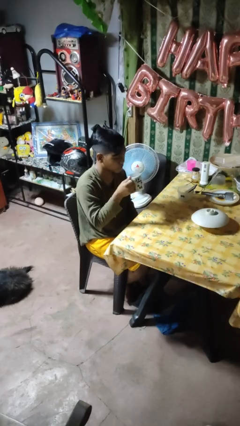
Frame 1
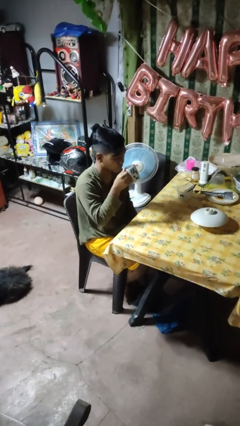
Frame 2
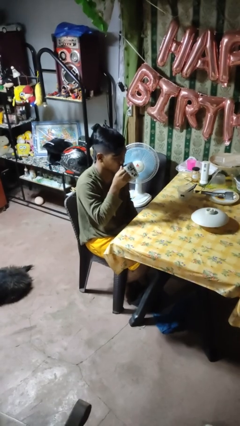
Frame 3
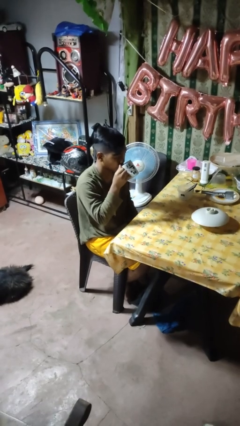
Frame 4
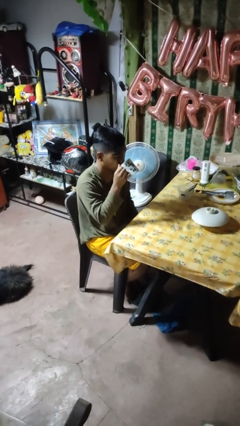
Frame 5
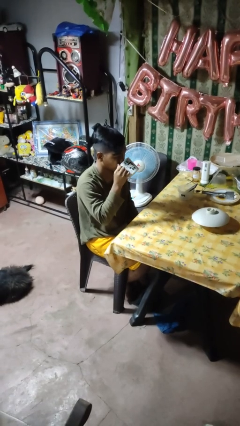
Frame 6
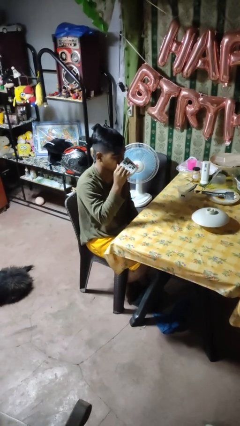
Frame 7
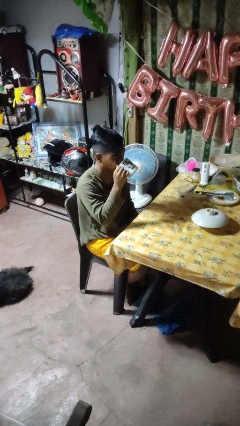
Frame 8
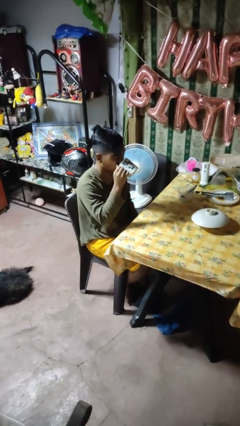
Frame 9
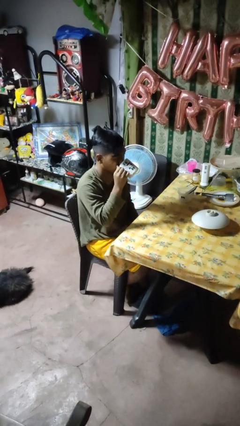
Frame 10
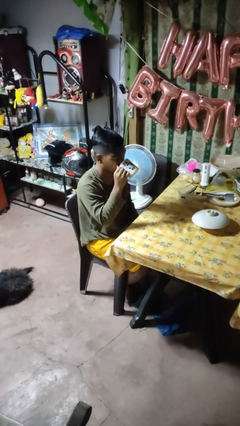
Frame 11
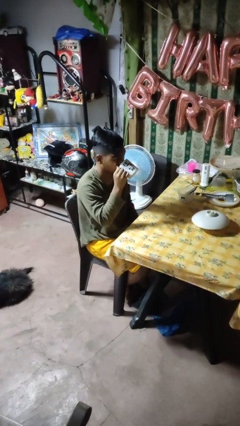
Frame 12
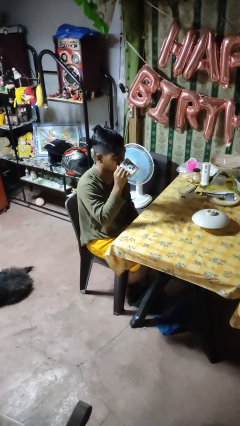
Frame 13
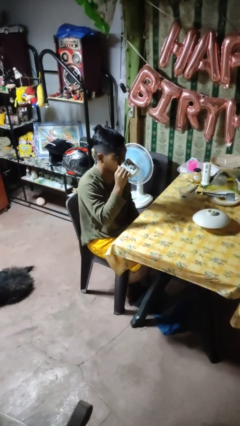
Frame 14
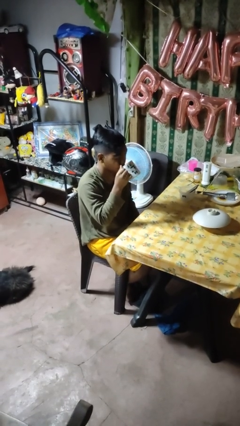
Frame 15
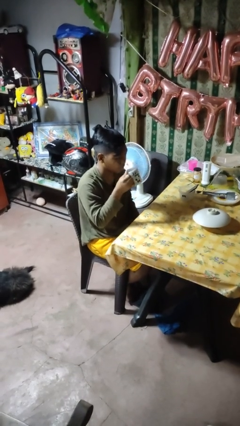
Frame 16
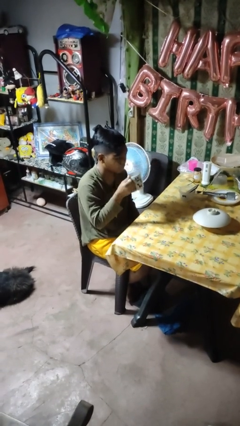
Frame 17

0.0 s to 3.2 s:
person drinks from mug

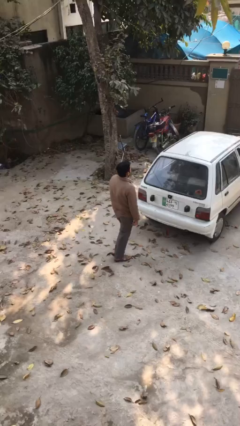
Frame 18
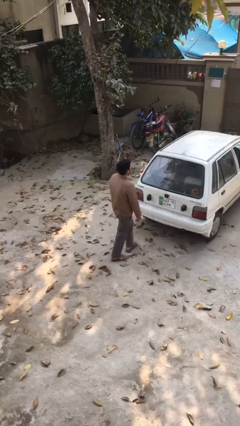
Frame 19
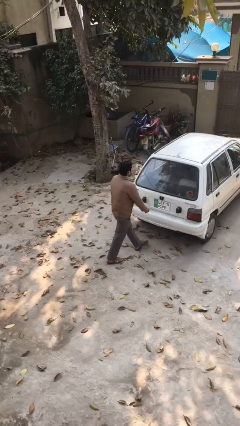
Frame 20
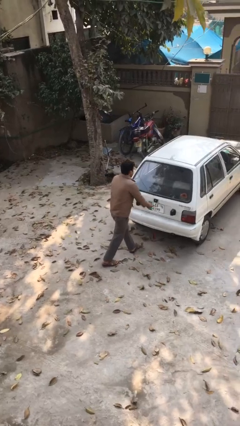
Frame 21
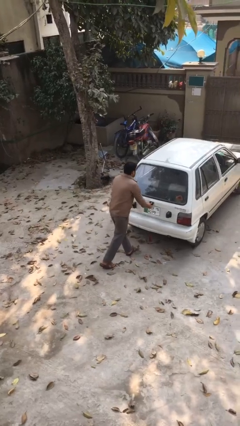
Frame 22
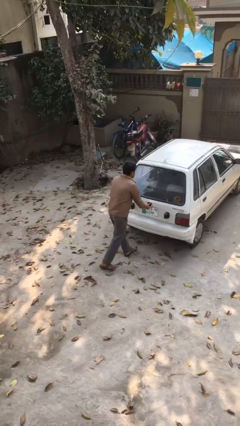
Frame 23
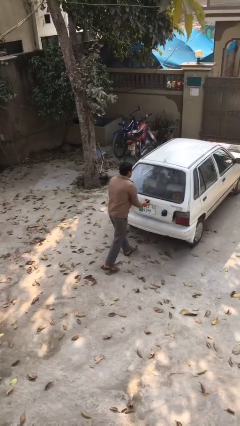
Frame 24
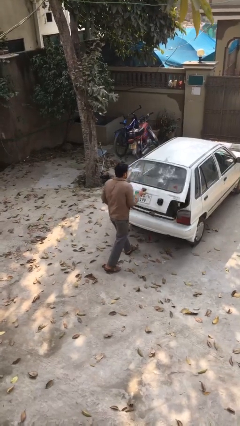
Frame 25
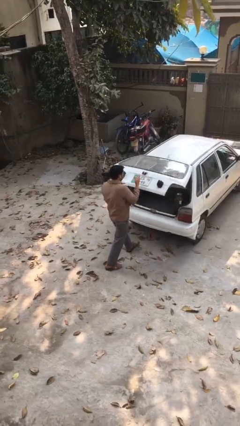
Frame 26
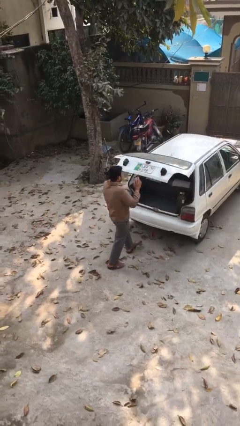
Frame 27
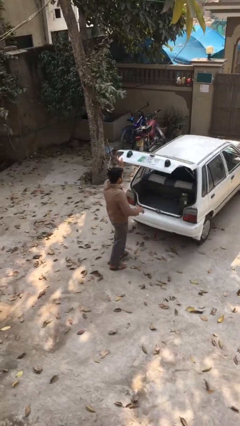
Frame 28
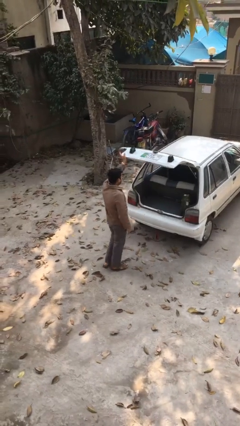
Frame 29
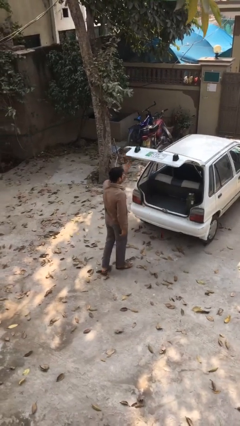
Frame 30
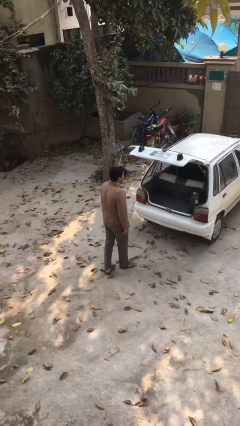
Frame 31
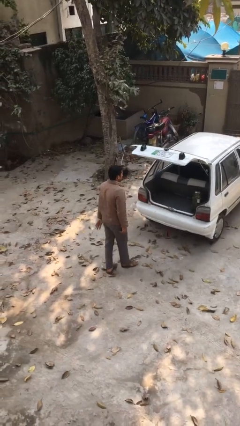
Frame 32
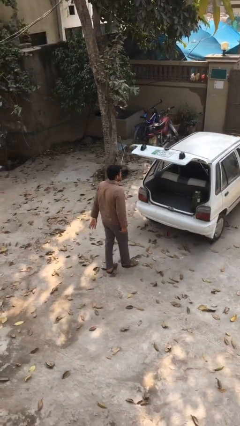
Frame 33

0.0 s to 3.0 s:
person opens car trunk

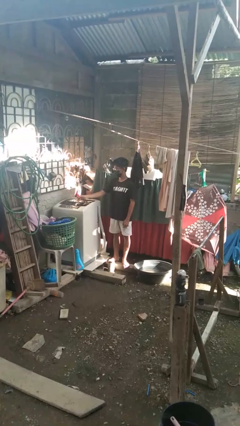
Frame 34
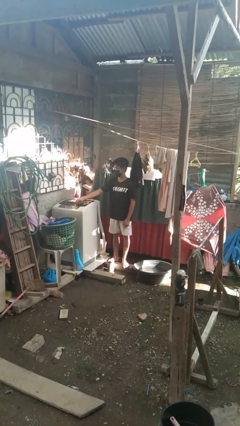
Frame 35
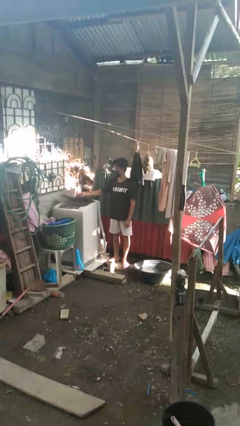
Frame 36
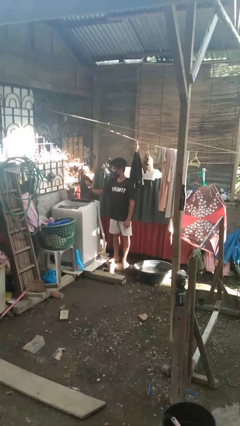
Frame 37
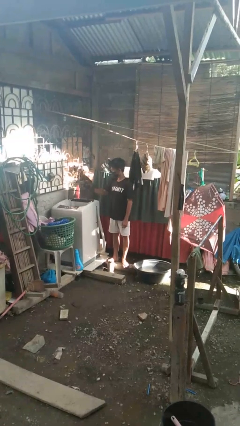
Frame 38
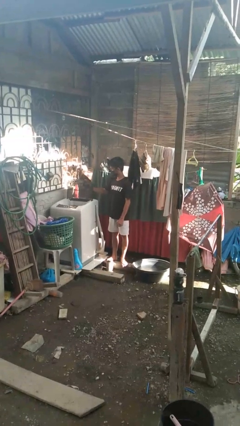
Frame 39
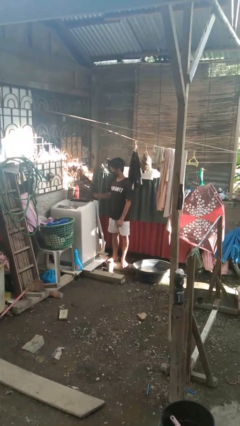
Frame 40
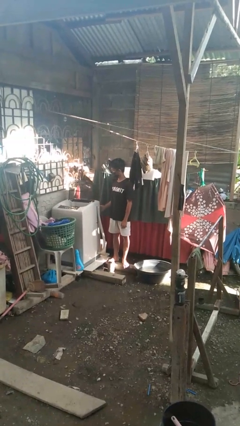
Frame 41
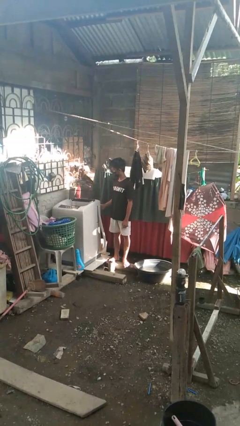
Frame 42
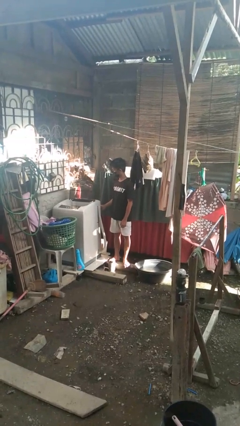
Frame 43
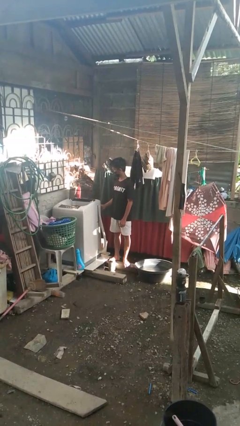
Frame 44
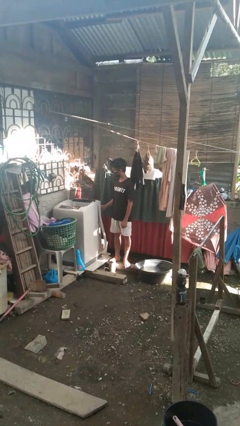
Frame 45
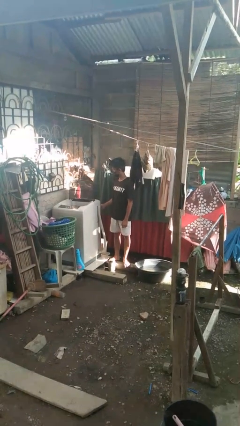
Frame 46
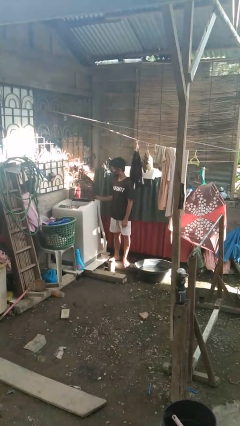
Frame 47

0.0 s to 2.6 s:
person opens clothes washer

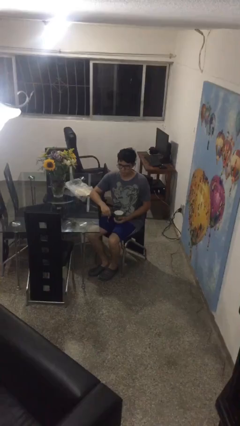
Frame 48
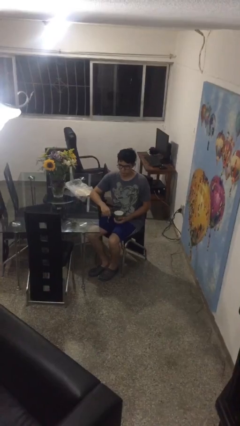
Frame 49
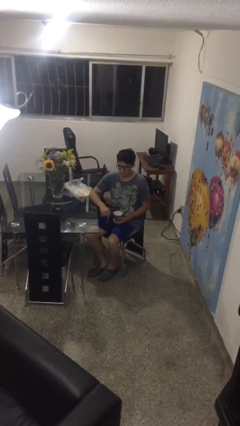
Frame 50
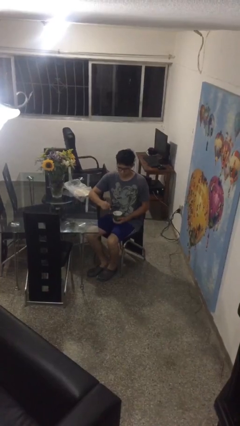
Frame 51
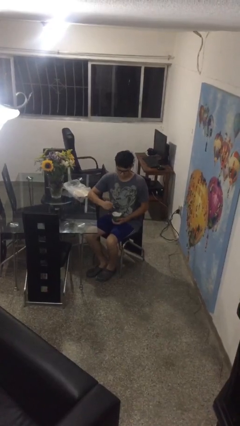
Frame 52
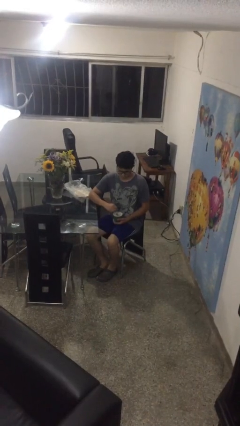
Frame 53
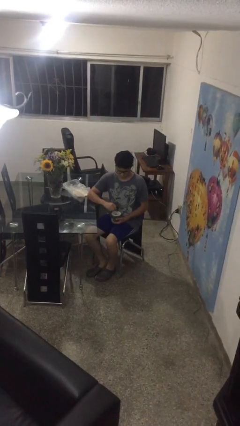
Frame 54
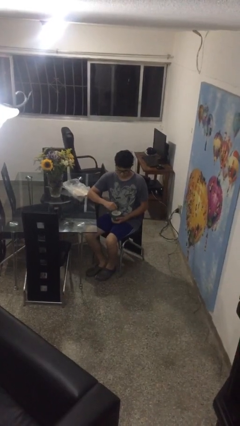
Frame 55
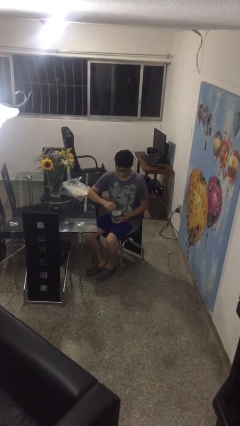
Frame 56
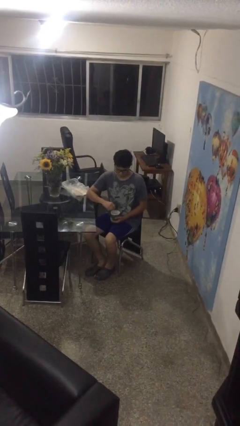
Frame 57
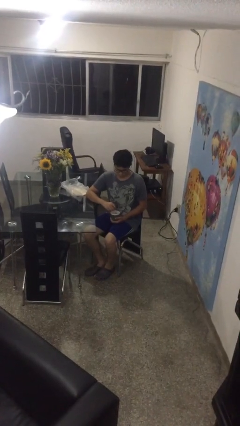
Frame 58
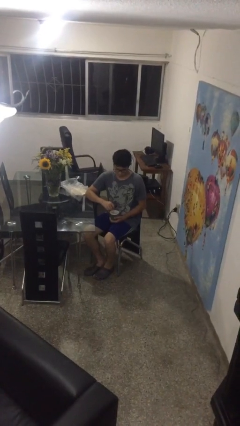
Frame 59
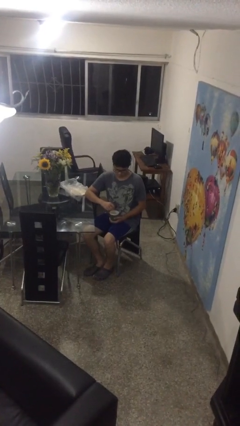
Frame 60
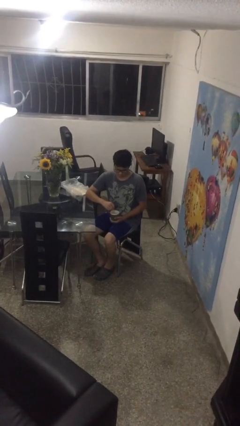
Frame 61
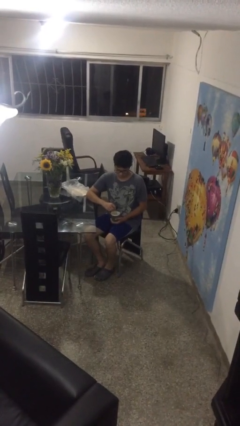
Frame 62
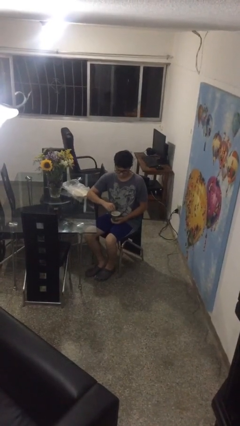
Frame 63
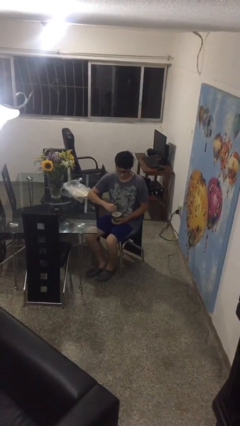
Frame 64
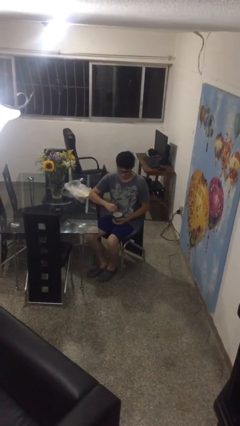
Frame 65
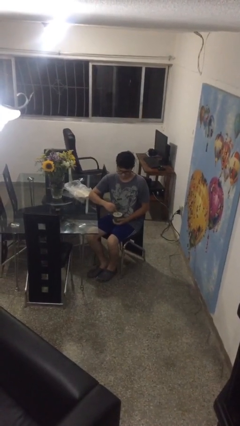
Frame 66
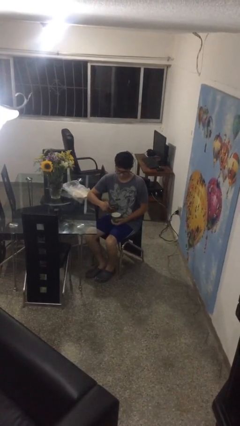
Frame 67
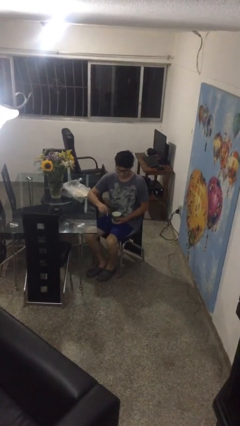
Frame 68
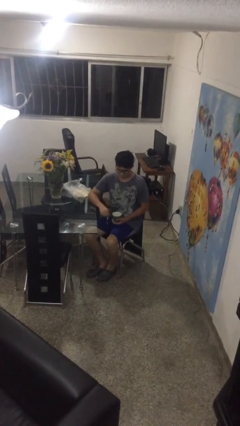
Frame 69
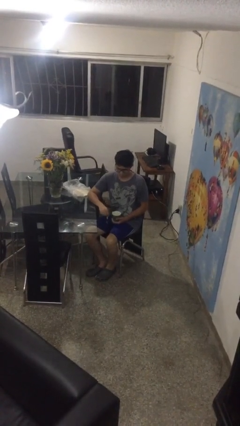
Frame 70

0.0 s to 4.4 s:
person stirs mug

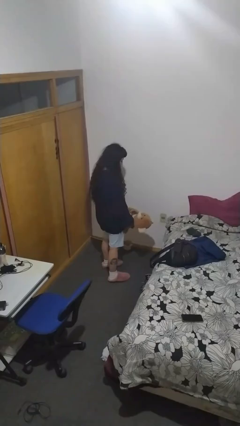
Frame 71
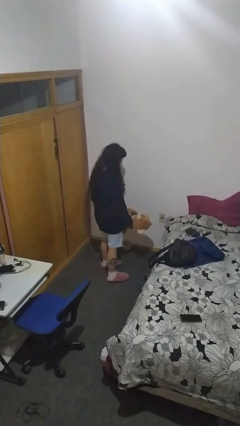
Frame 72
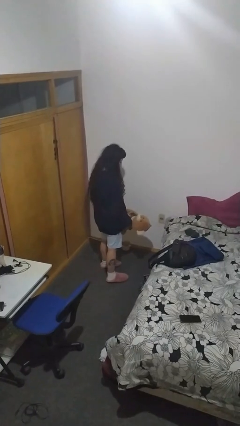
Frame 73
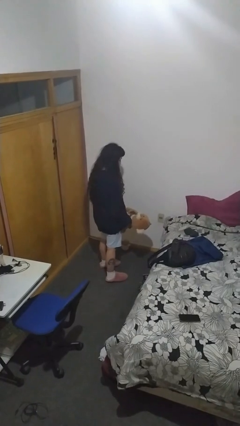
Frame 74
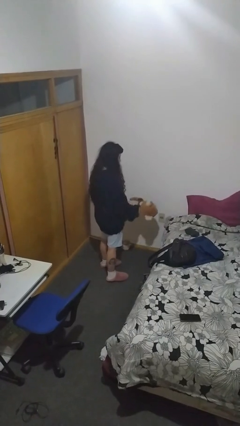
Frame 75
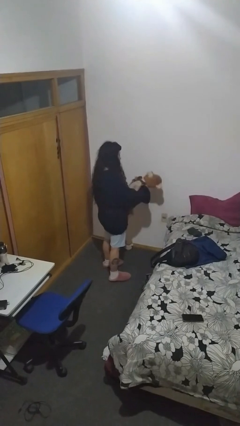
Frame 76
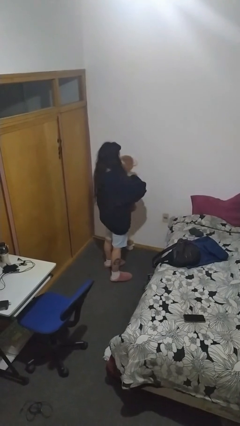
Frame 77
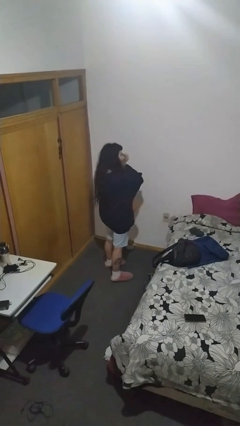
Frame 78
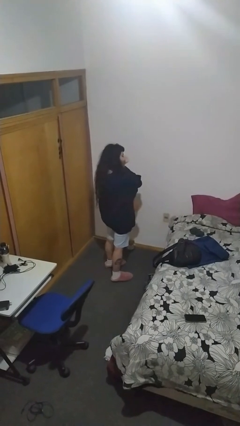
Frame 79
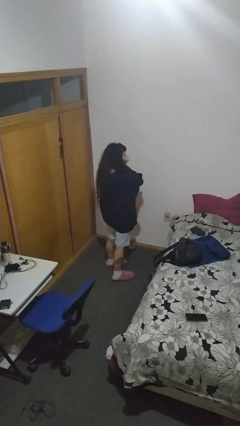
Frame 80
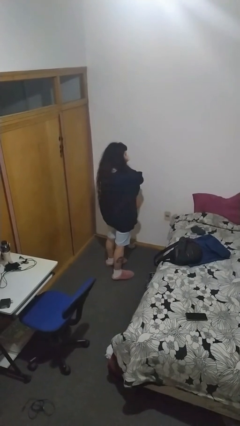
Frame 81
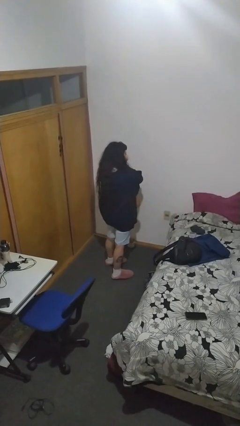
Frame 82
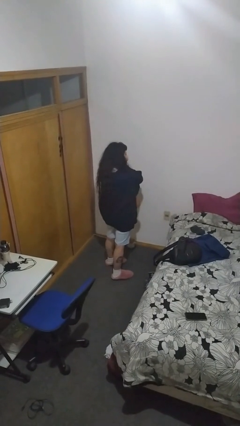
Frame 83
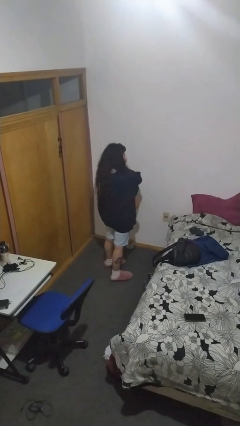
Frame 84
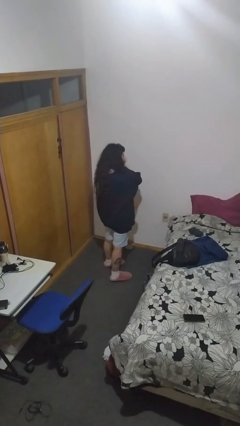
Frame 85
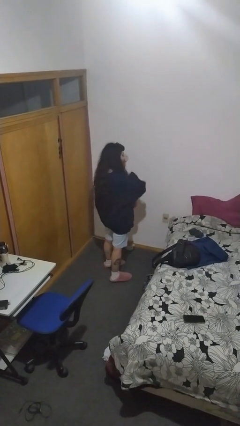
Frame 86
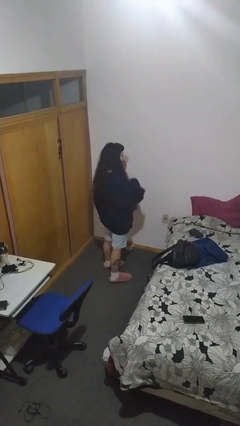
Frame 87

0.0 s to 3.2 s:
person hugs stuffed animal

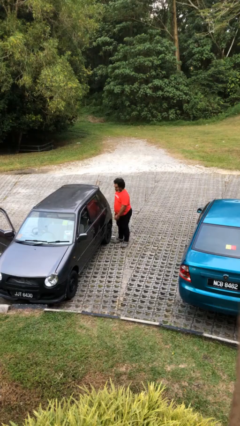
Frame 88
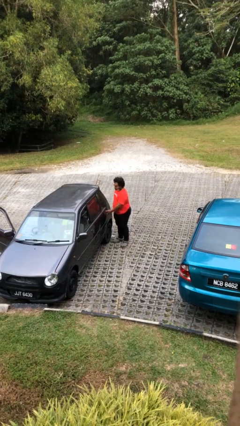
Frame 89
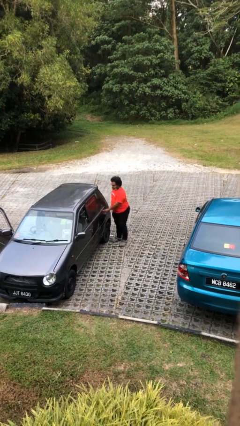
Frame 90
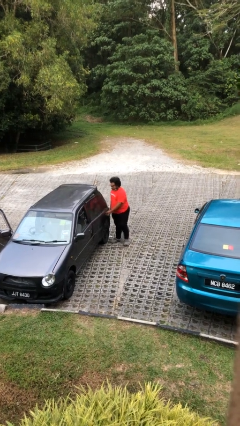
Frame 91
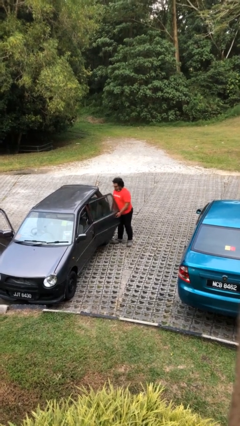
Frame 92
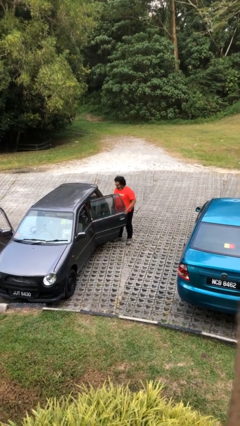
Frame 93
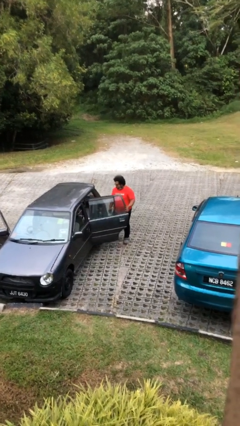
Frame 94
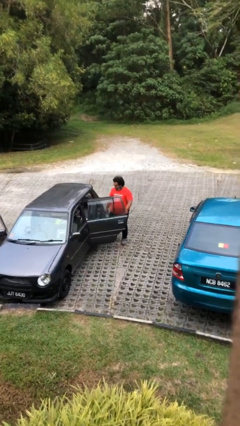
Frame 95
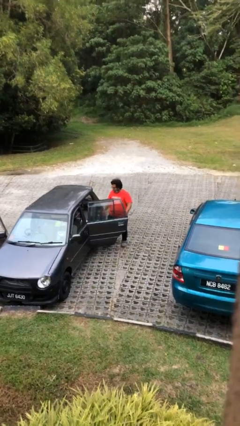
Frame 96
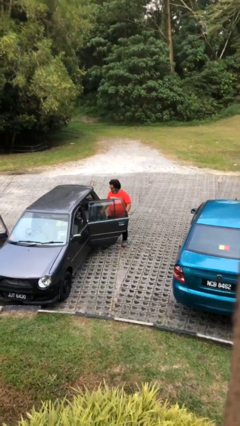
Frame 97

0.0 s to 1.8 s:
person opens car door
